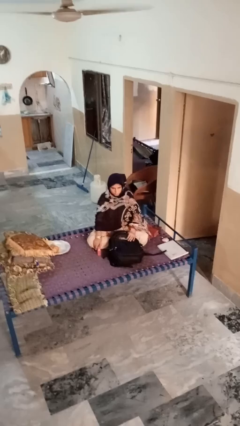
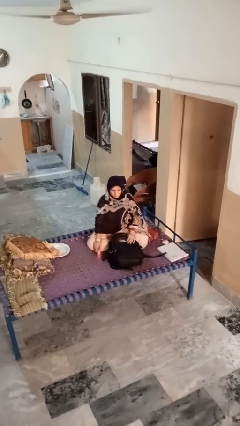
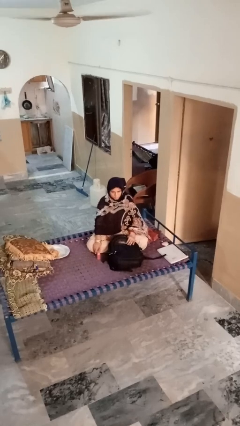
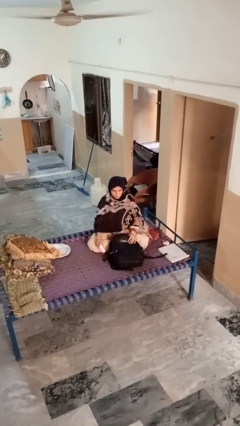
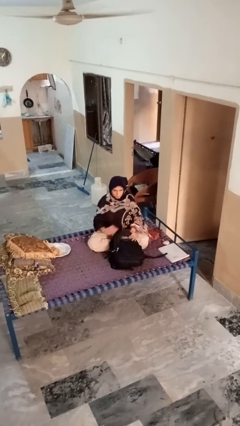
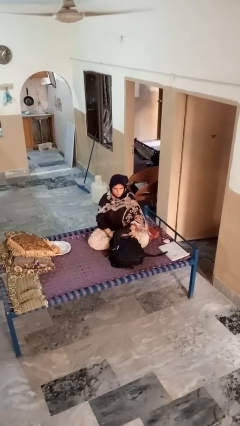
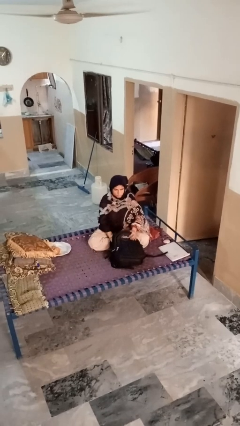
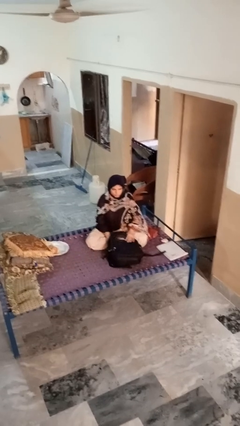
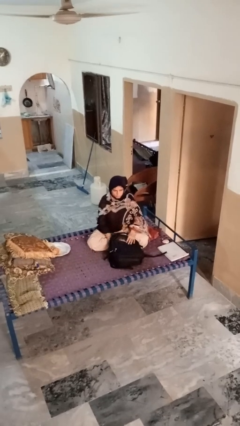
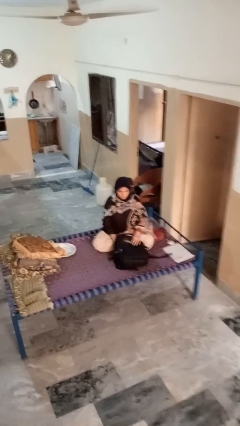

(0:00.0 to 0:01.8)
person puts object into bag

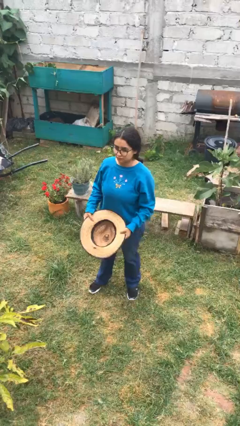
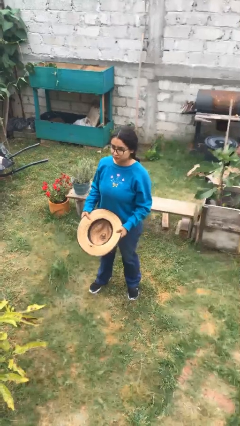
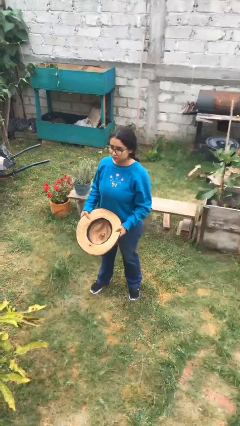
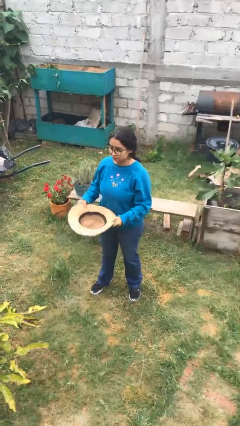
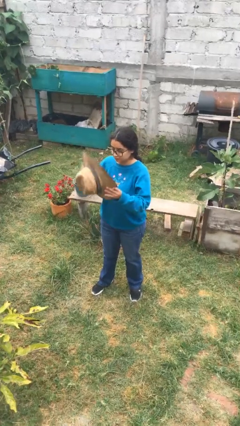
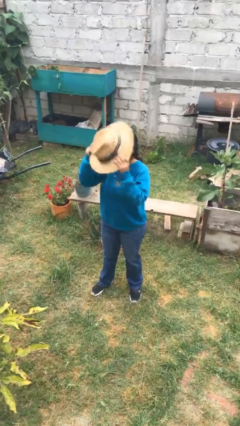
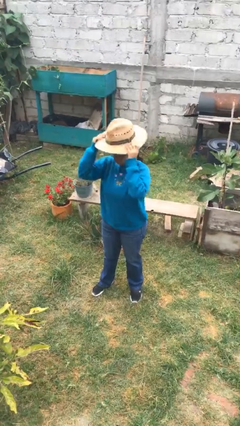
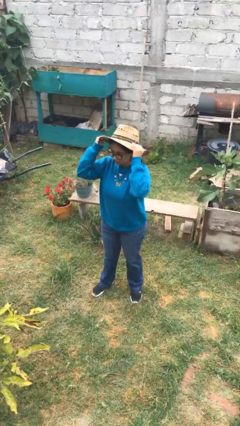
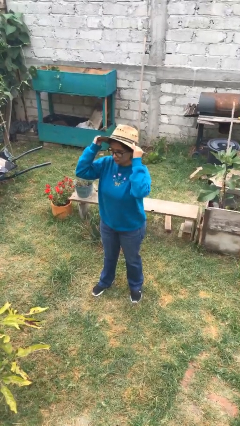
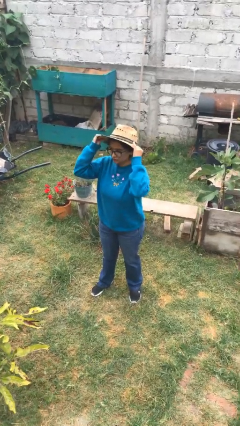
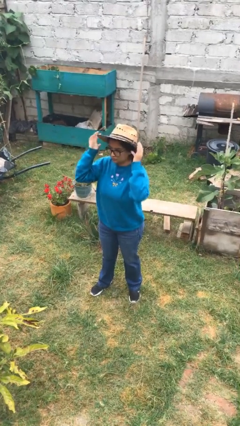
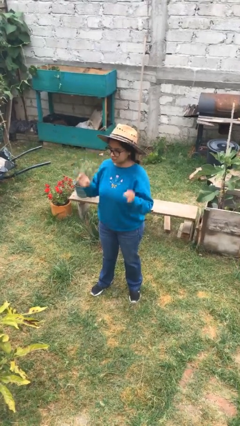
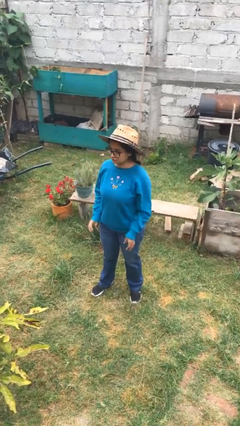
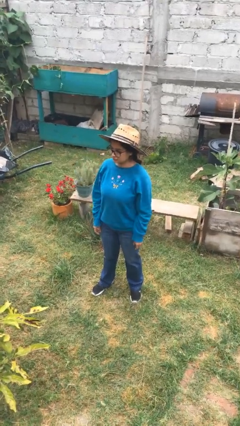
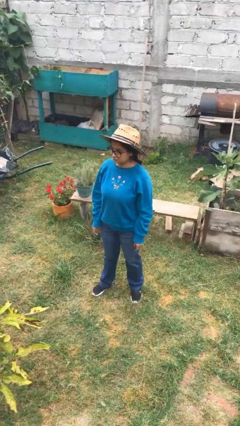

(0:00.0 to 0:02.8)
person puts on hat

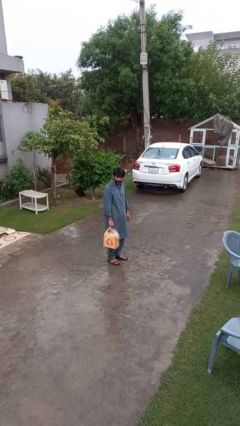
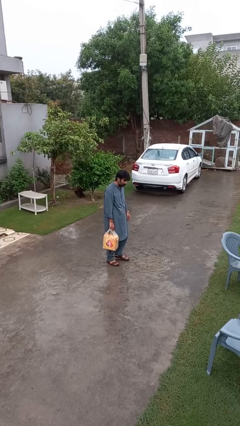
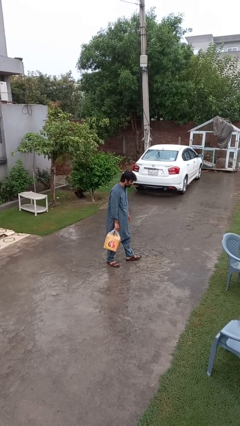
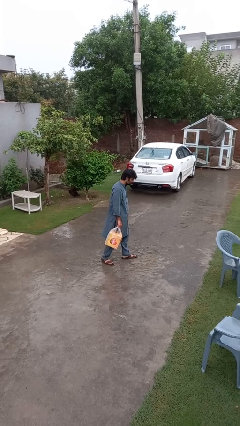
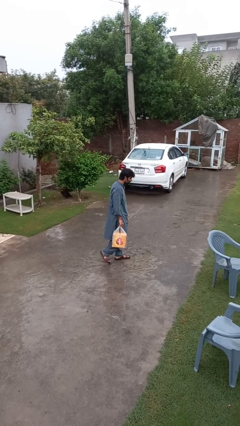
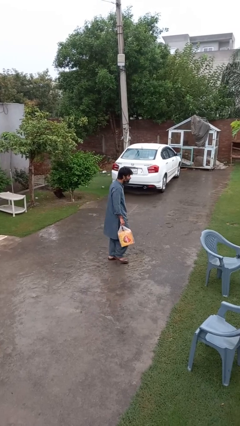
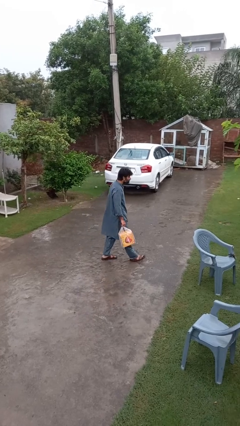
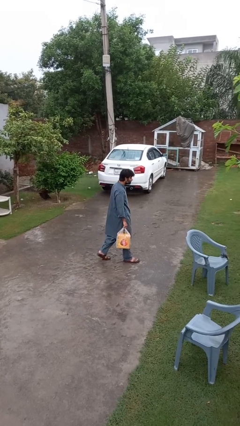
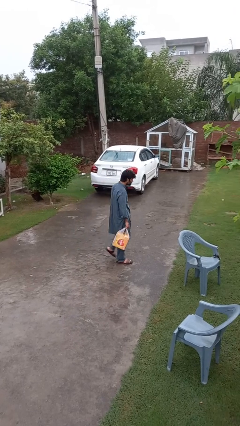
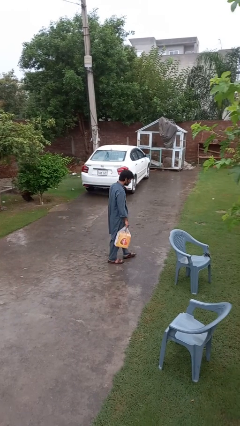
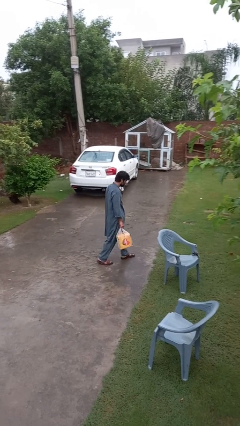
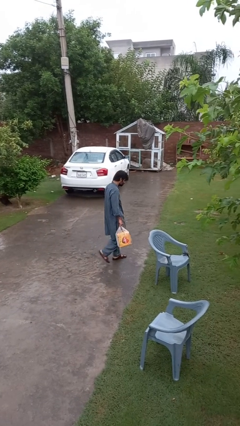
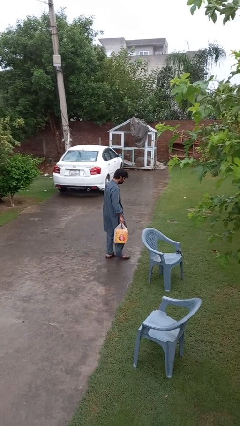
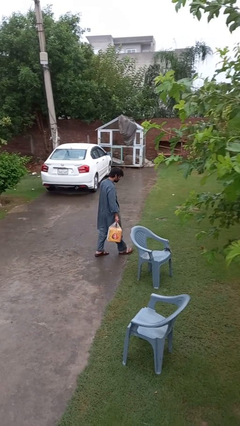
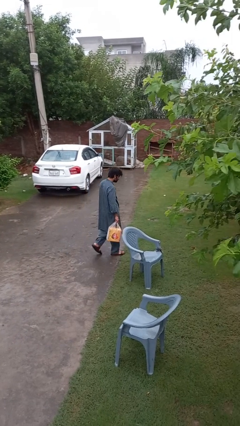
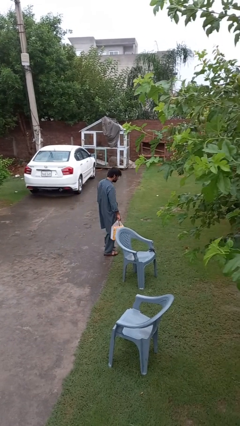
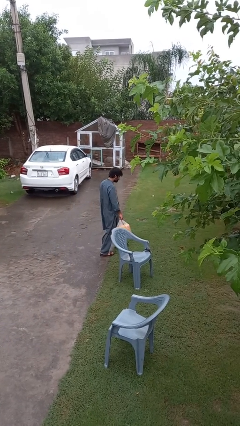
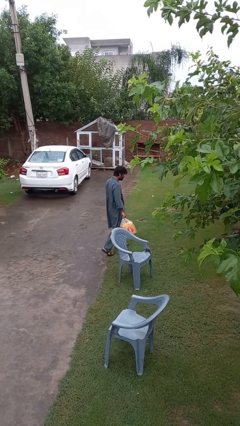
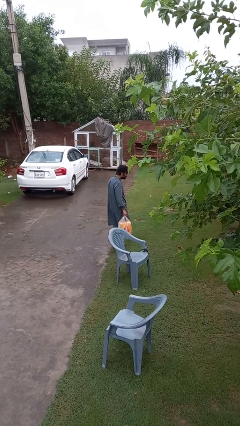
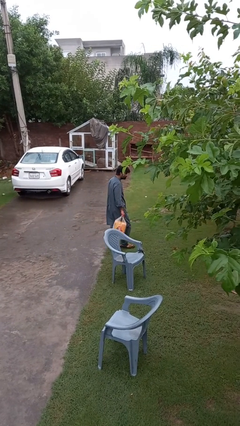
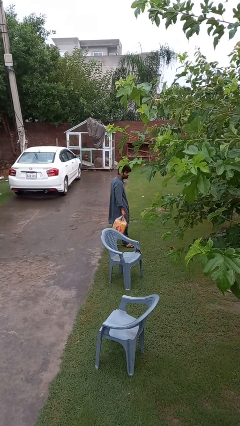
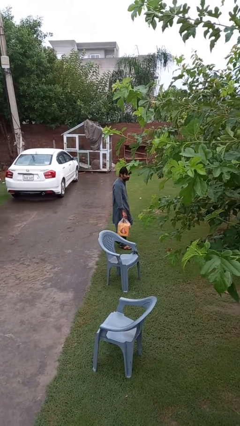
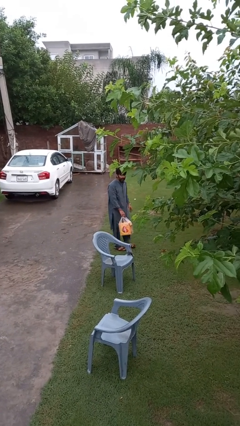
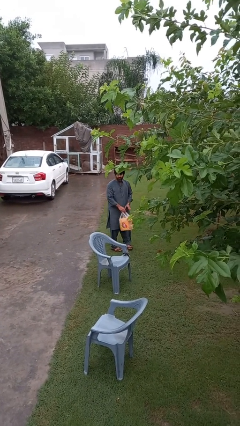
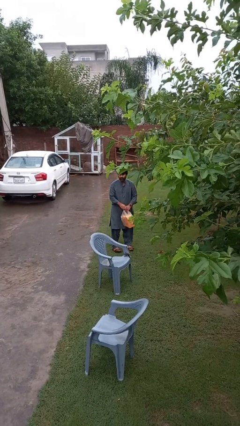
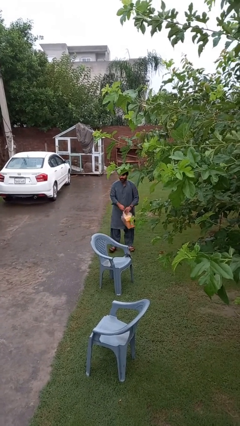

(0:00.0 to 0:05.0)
person carries groceries

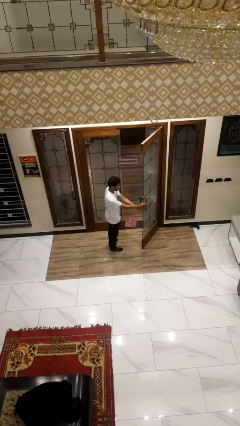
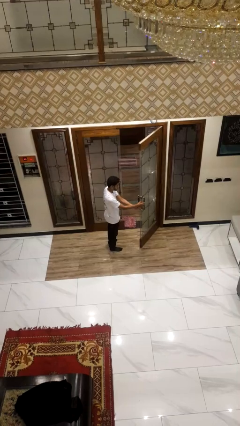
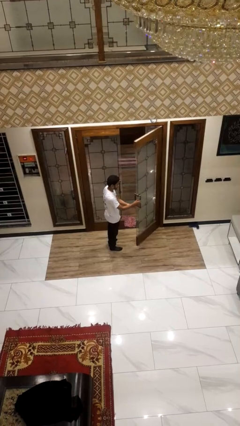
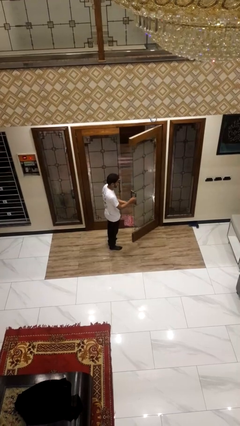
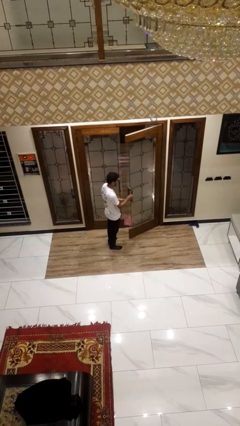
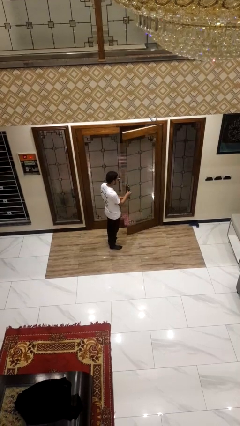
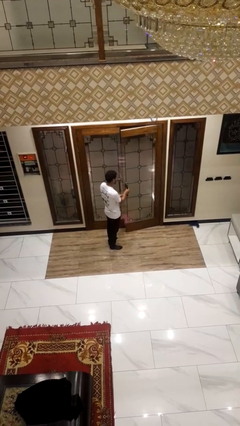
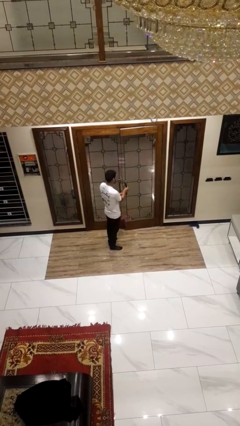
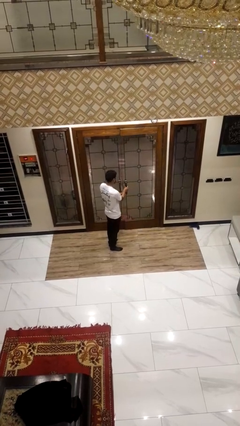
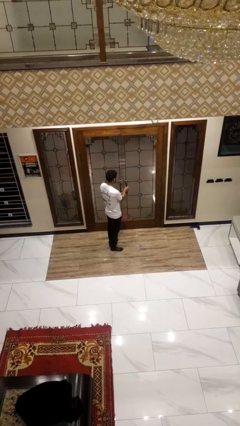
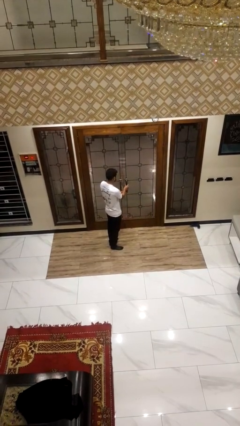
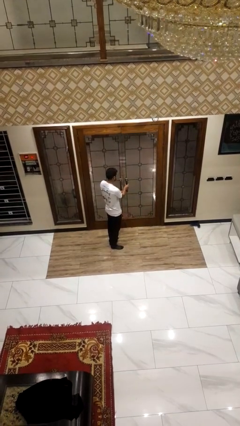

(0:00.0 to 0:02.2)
person closes facility door

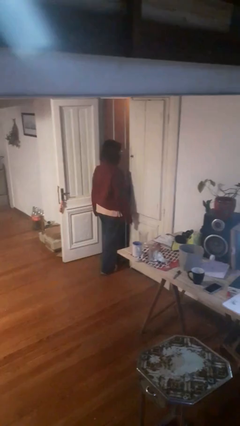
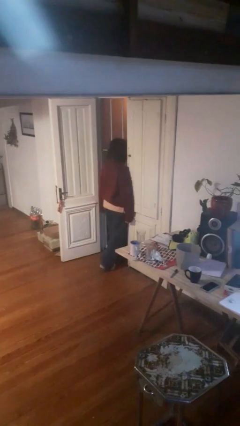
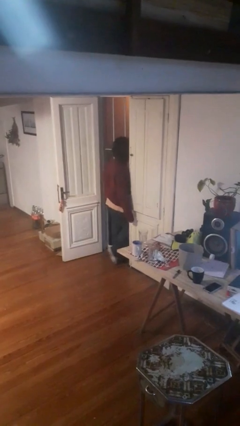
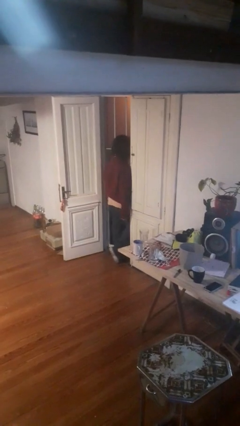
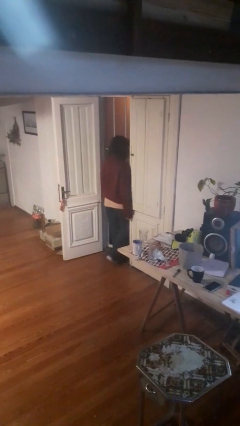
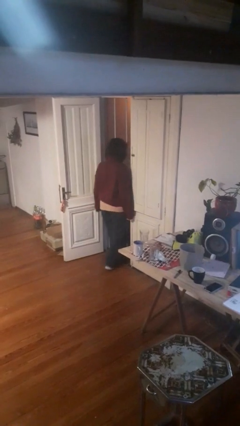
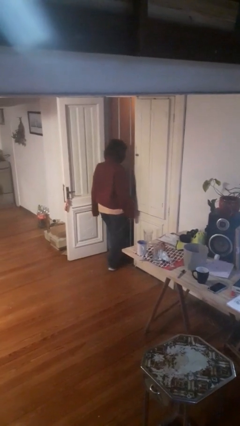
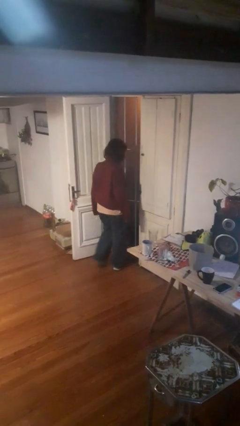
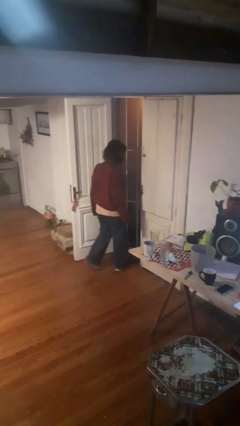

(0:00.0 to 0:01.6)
person bumps into wall

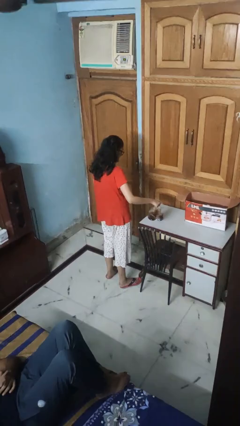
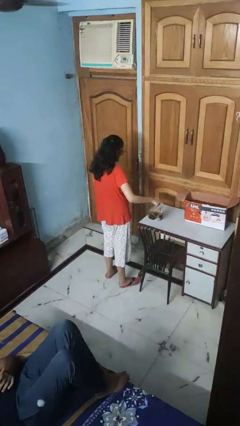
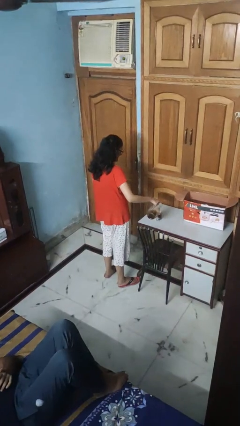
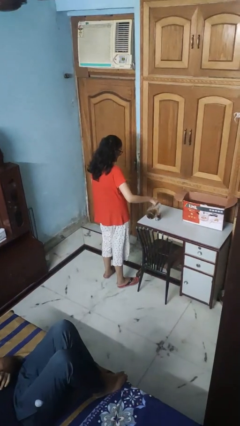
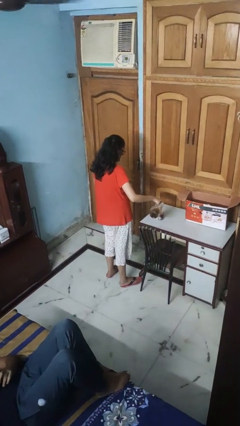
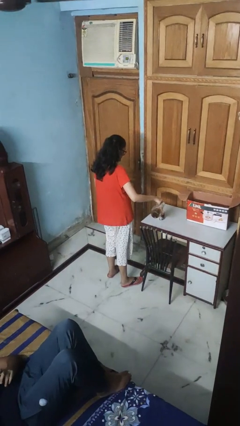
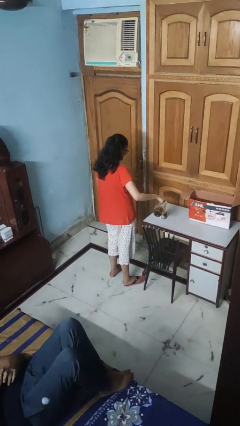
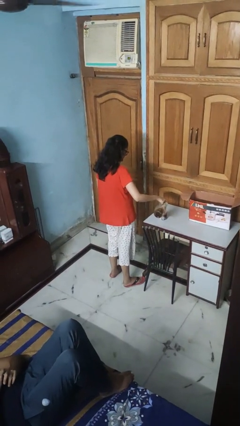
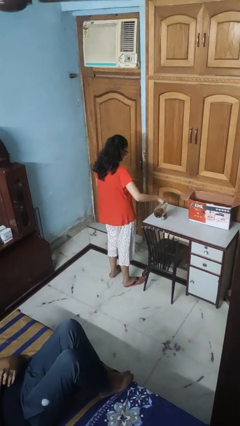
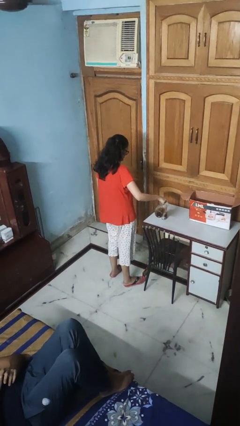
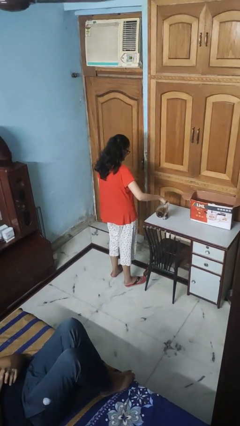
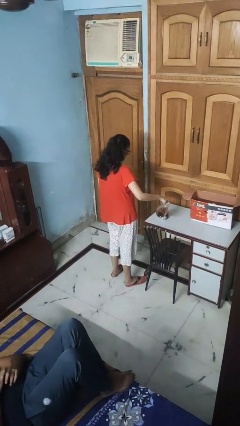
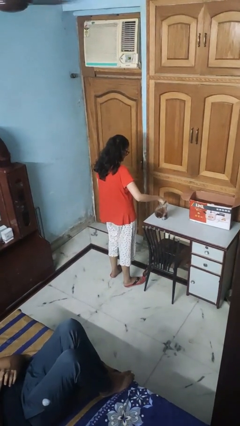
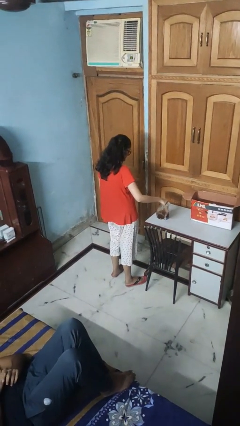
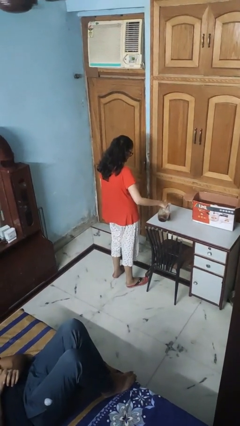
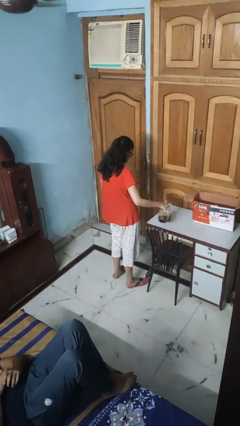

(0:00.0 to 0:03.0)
person pours coffee into mug

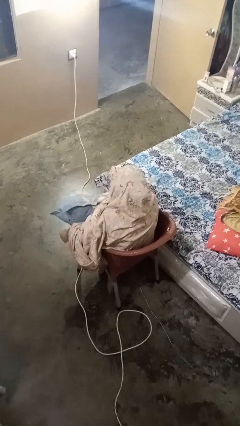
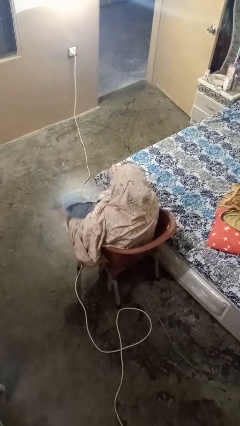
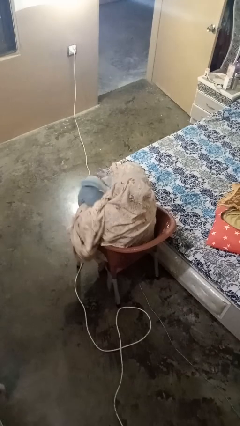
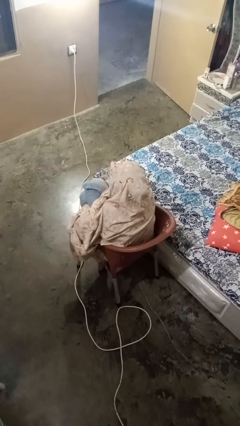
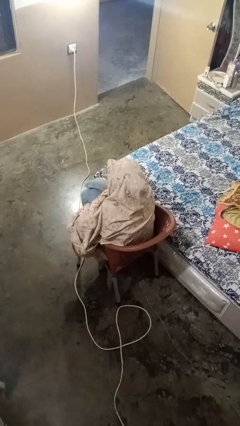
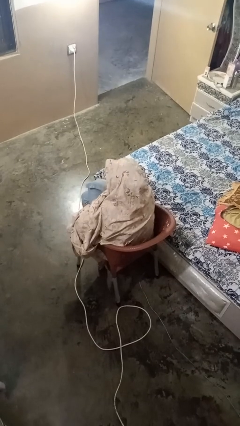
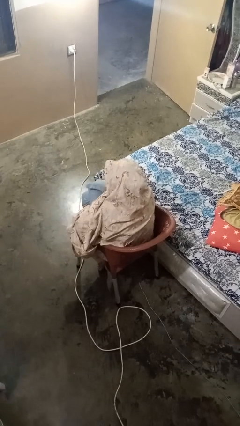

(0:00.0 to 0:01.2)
person squeezes object
